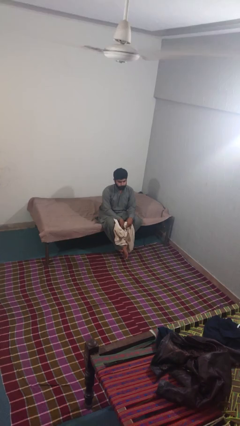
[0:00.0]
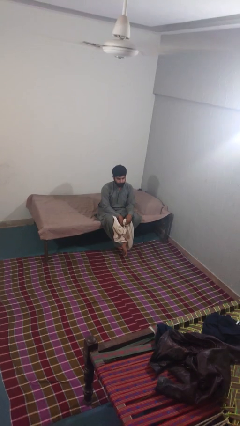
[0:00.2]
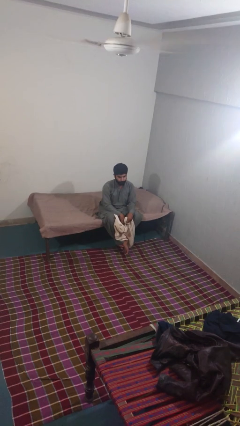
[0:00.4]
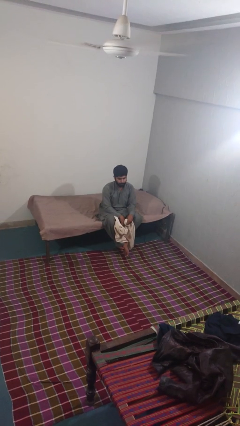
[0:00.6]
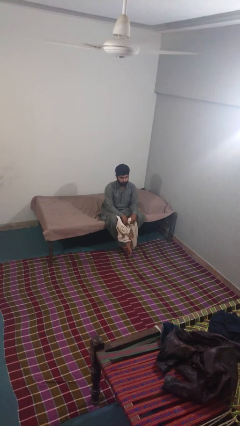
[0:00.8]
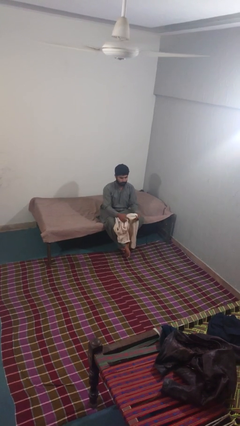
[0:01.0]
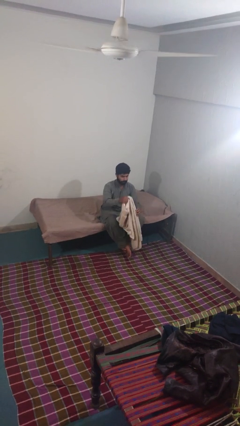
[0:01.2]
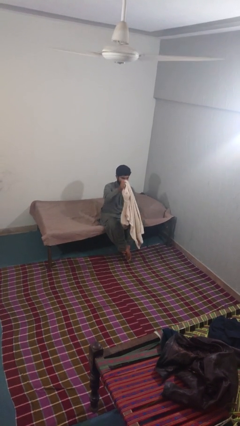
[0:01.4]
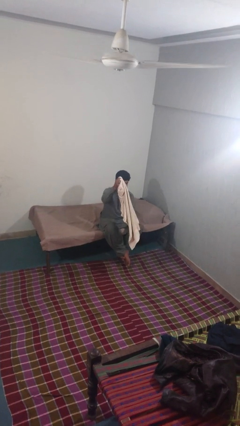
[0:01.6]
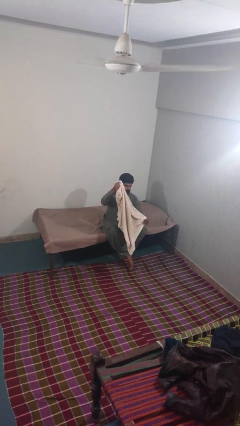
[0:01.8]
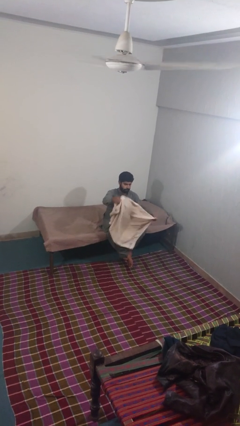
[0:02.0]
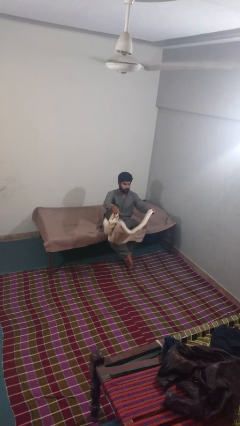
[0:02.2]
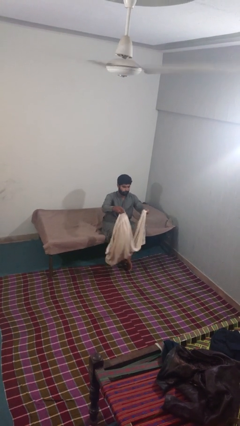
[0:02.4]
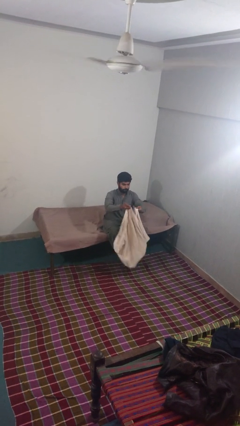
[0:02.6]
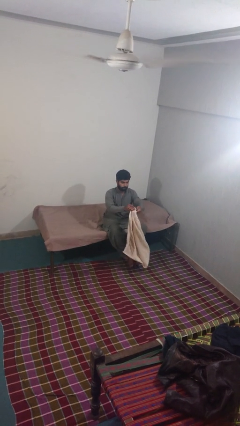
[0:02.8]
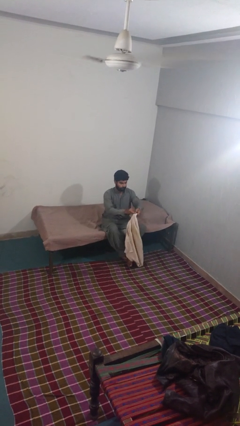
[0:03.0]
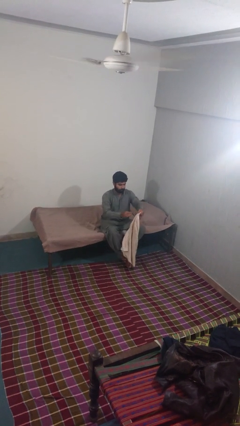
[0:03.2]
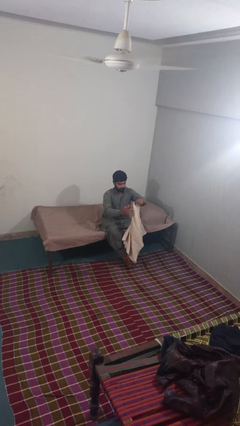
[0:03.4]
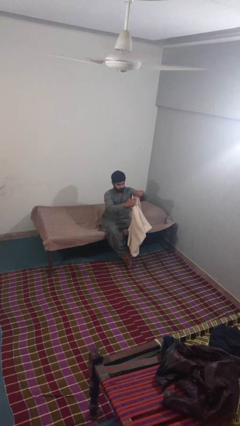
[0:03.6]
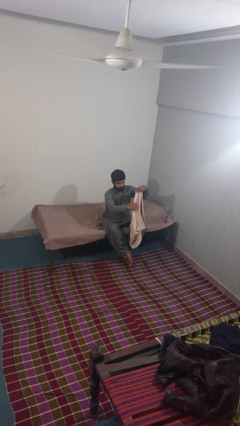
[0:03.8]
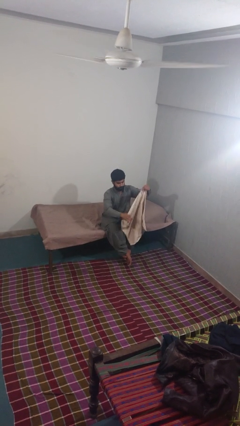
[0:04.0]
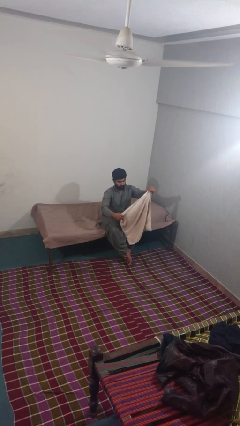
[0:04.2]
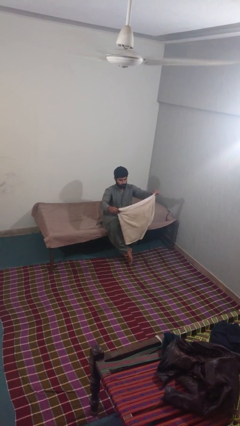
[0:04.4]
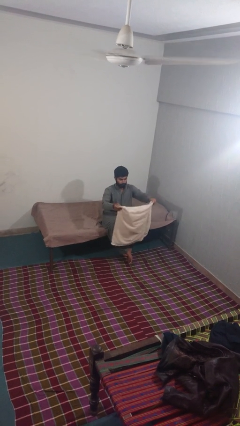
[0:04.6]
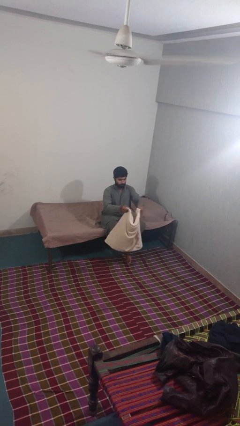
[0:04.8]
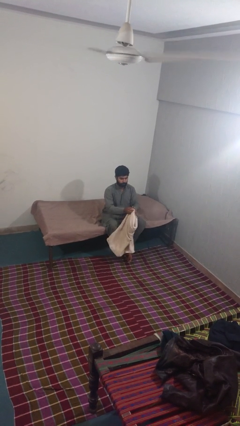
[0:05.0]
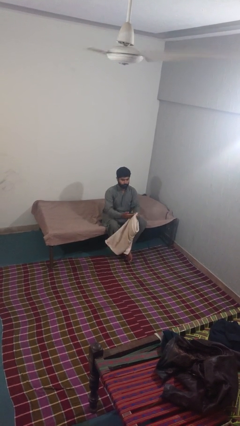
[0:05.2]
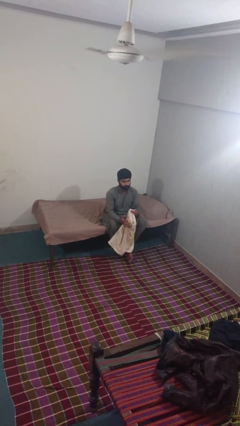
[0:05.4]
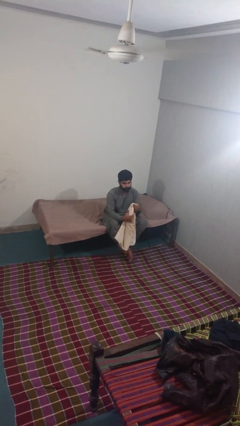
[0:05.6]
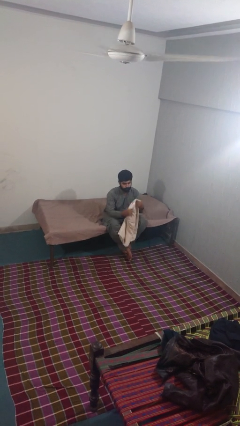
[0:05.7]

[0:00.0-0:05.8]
person folds towel

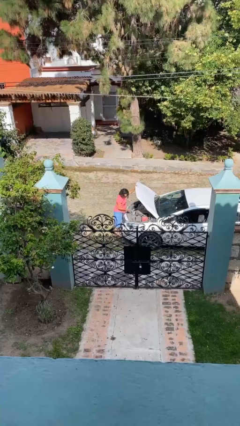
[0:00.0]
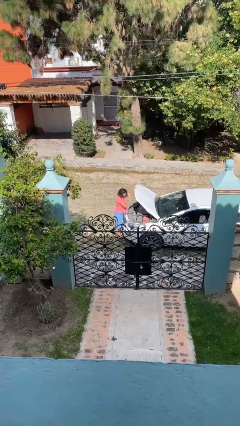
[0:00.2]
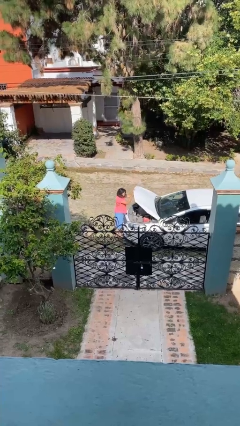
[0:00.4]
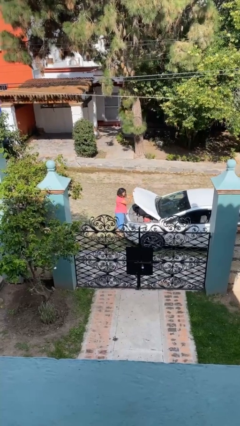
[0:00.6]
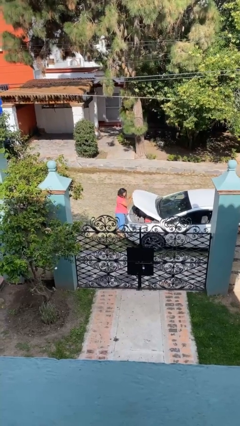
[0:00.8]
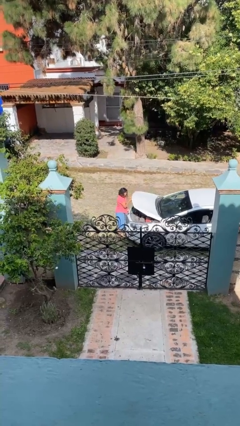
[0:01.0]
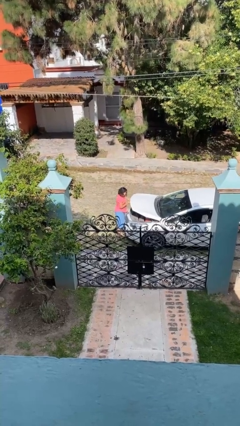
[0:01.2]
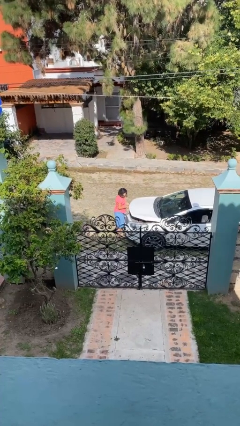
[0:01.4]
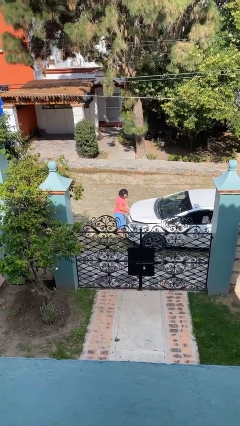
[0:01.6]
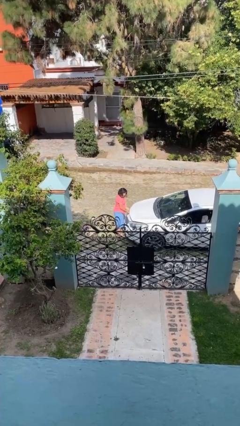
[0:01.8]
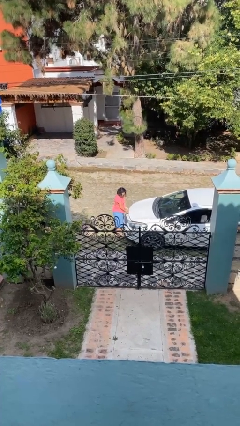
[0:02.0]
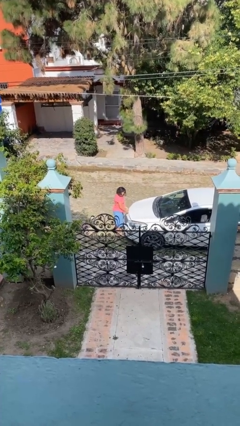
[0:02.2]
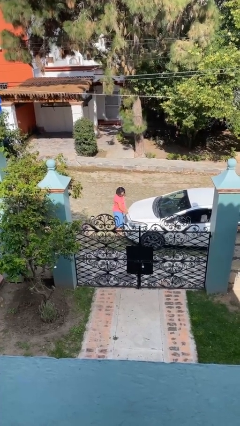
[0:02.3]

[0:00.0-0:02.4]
person closes car hood

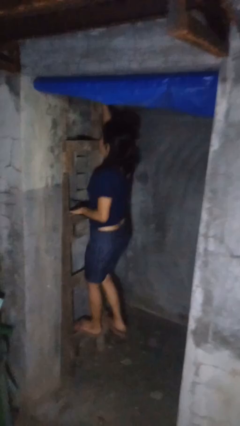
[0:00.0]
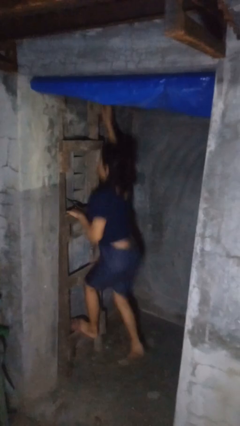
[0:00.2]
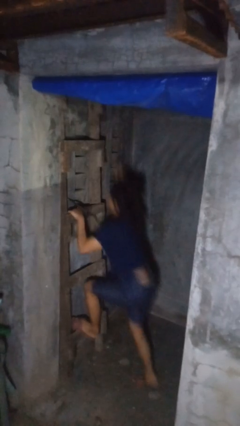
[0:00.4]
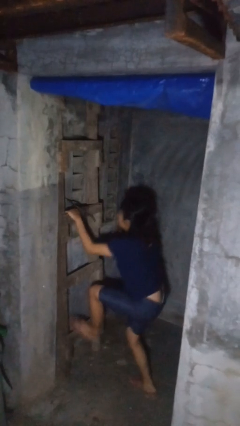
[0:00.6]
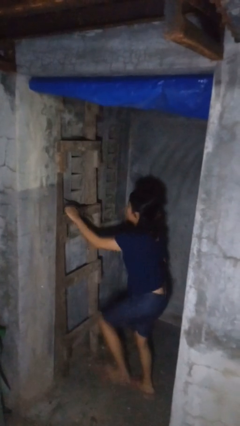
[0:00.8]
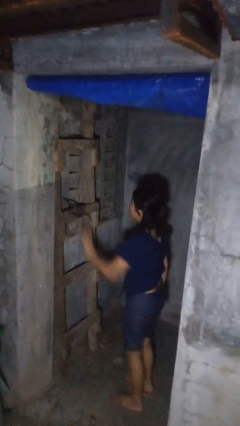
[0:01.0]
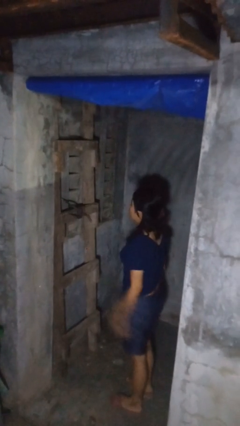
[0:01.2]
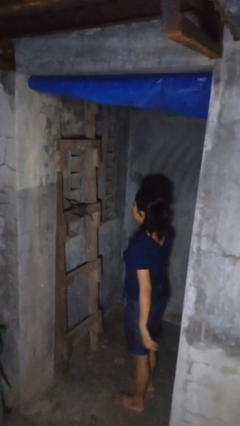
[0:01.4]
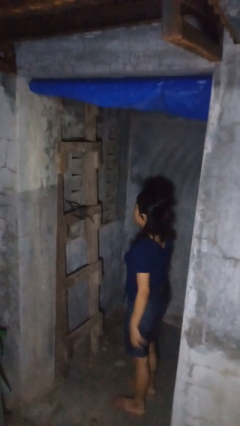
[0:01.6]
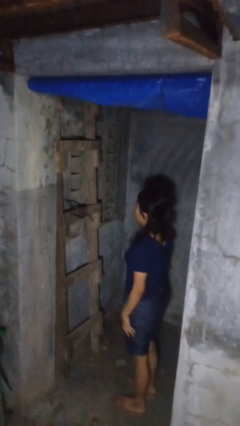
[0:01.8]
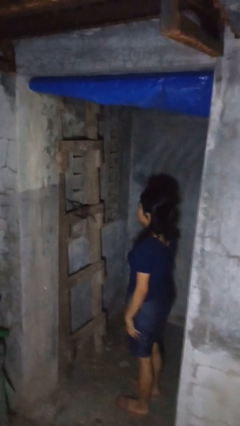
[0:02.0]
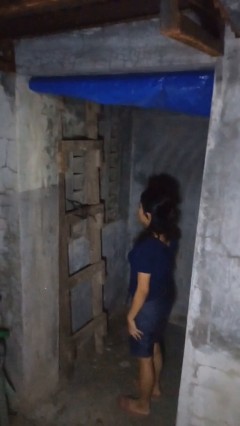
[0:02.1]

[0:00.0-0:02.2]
person climbs down ladder

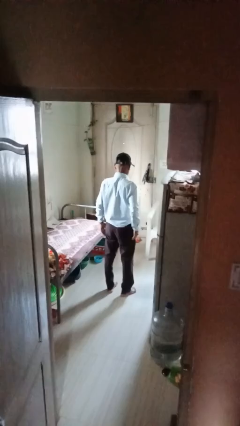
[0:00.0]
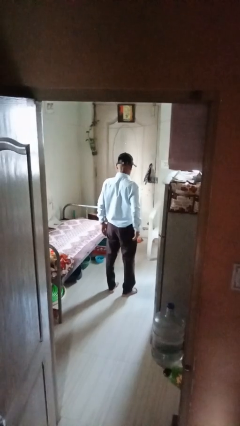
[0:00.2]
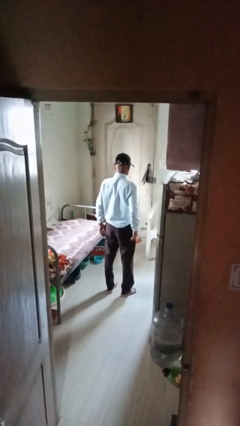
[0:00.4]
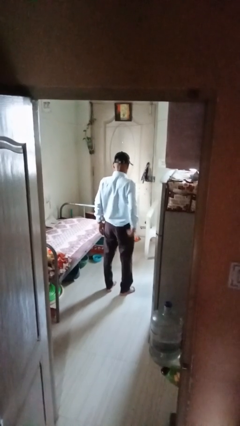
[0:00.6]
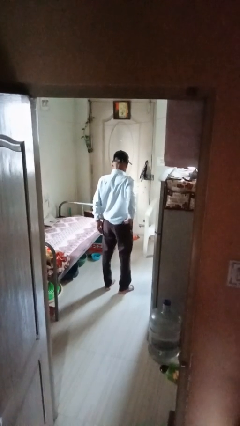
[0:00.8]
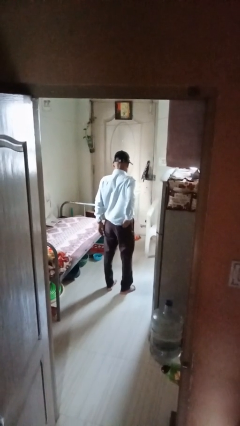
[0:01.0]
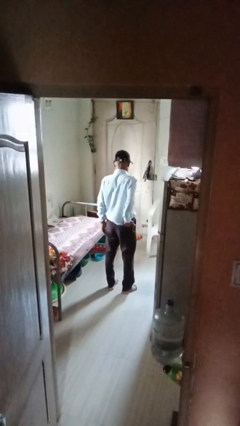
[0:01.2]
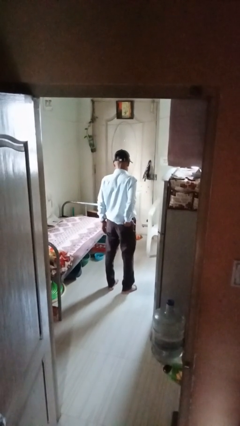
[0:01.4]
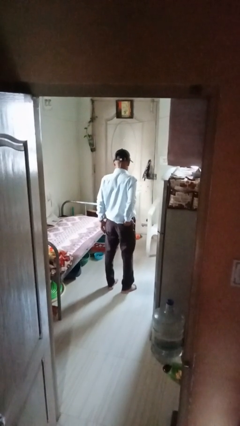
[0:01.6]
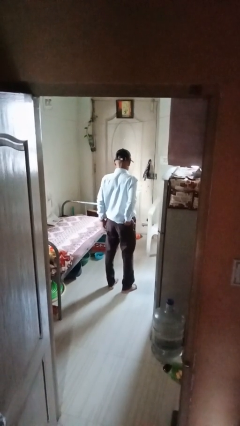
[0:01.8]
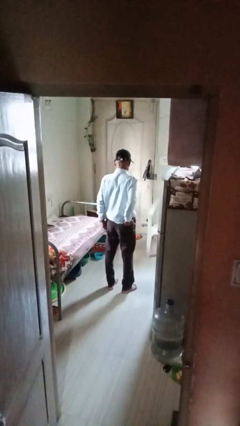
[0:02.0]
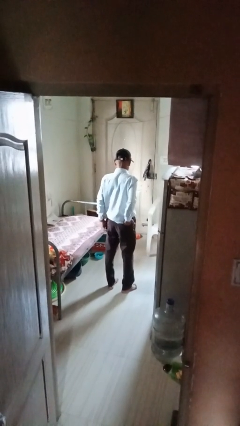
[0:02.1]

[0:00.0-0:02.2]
person puts hands in back pockets

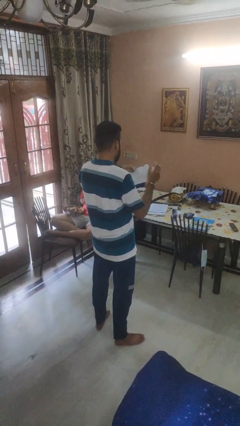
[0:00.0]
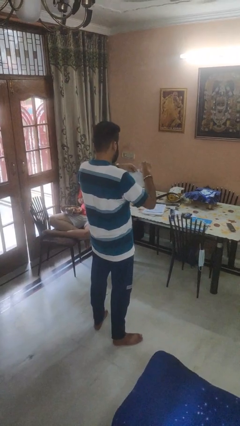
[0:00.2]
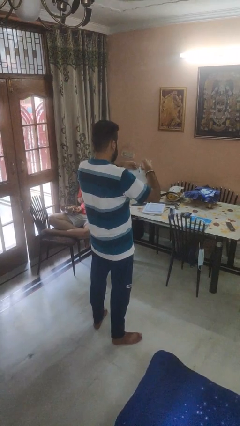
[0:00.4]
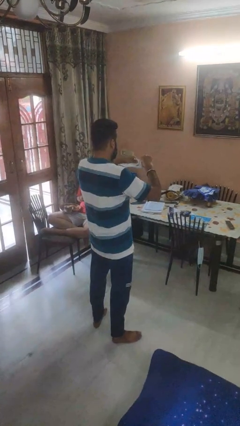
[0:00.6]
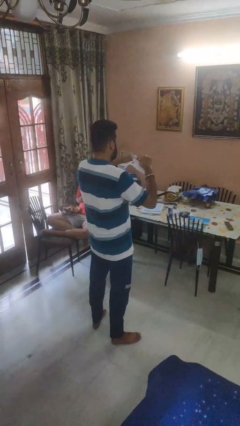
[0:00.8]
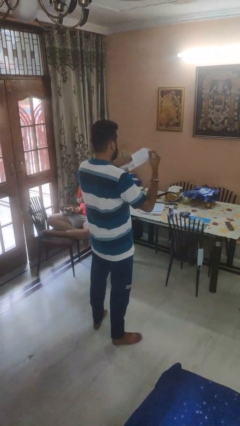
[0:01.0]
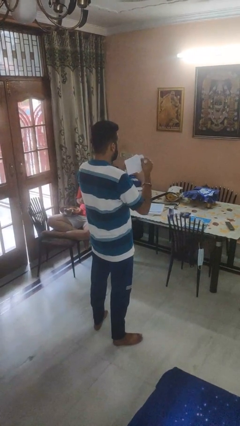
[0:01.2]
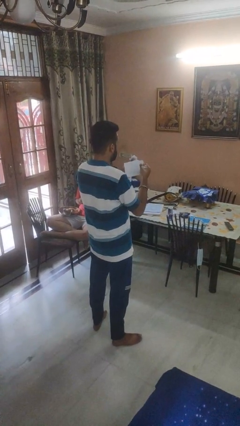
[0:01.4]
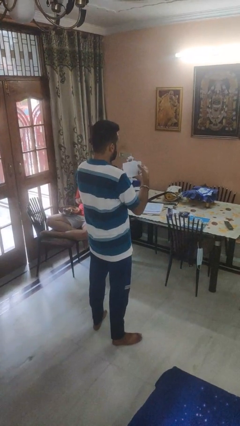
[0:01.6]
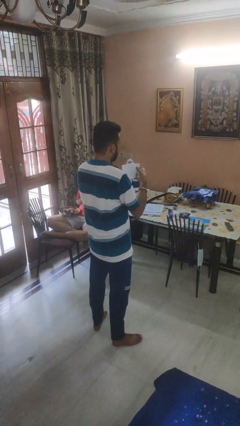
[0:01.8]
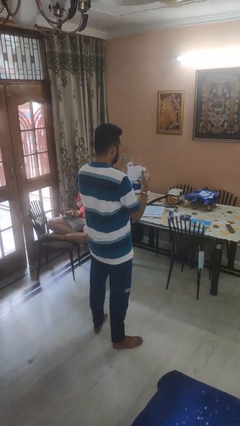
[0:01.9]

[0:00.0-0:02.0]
person tears paper

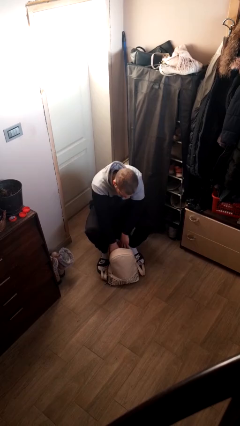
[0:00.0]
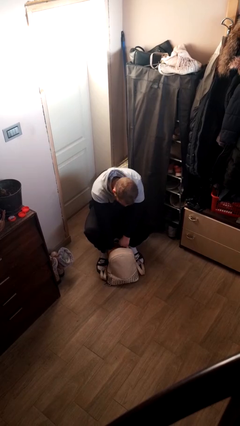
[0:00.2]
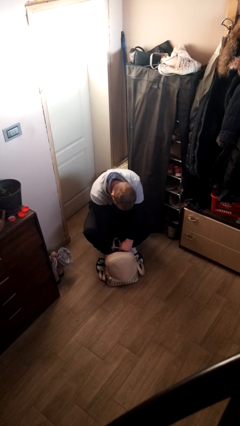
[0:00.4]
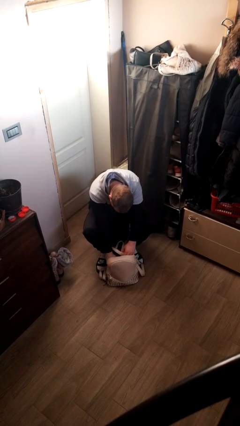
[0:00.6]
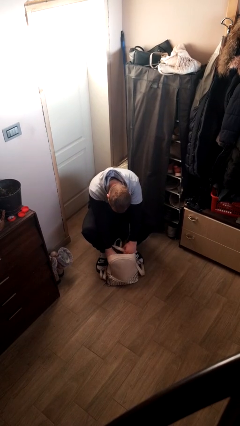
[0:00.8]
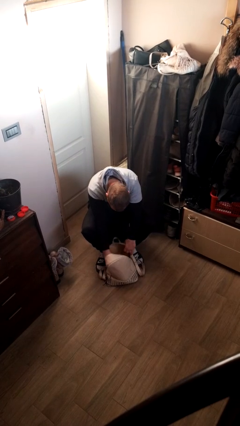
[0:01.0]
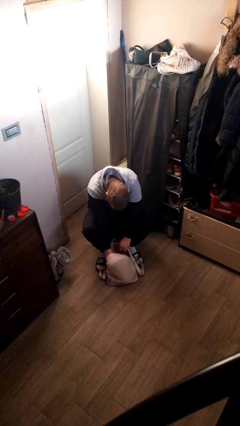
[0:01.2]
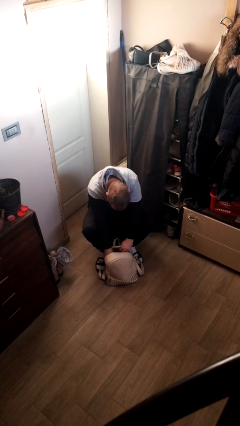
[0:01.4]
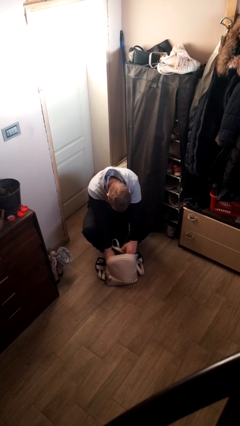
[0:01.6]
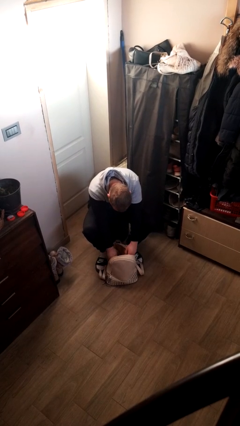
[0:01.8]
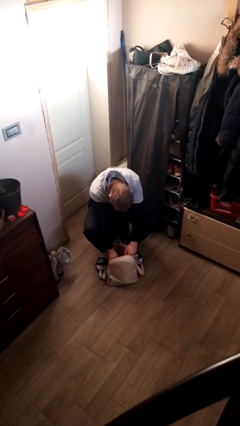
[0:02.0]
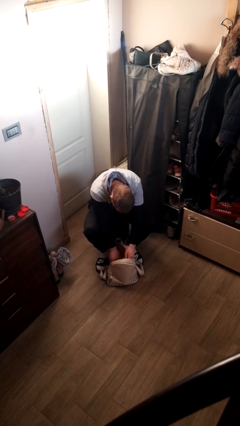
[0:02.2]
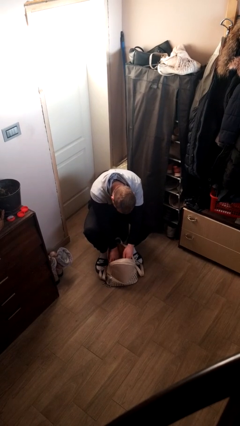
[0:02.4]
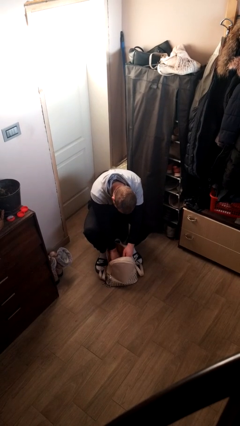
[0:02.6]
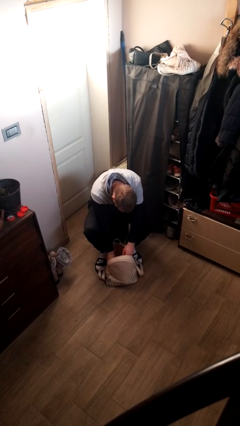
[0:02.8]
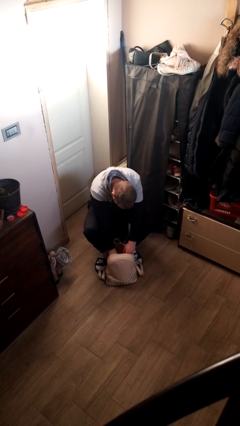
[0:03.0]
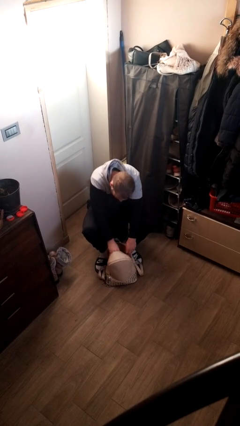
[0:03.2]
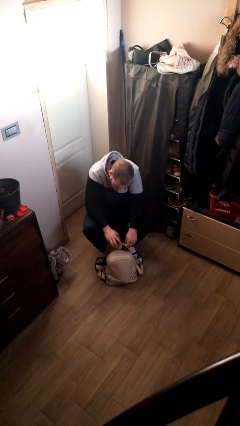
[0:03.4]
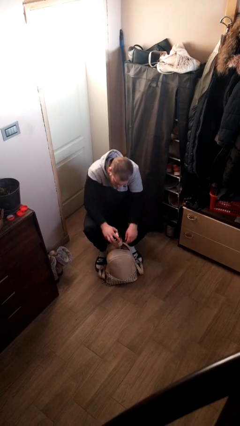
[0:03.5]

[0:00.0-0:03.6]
person searches in backpack
